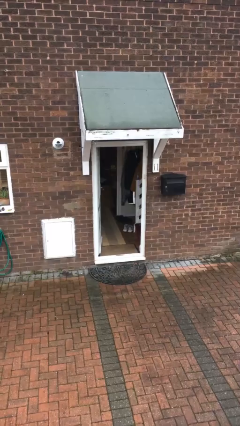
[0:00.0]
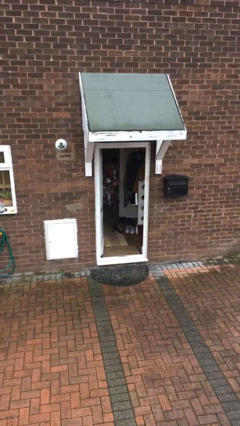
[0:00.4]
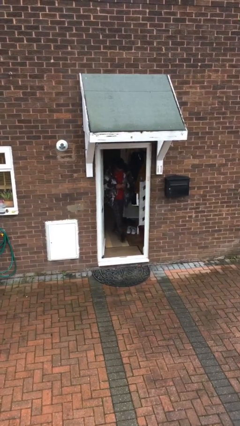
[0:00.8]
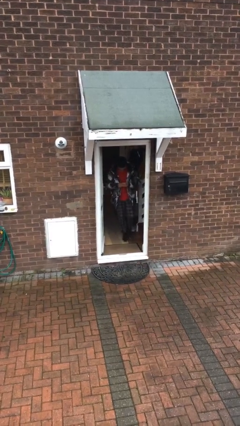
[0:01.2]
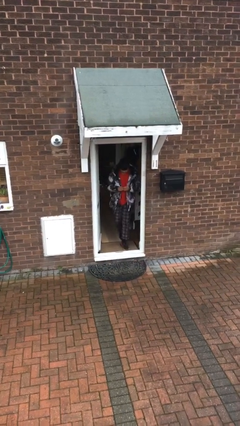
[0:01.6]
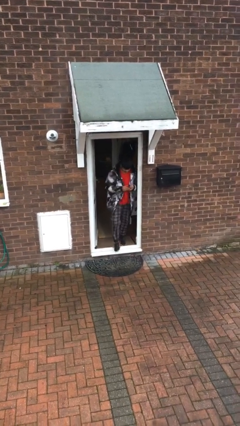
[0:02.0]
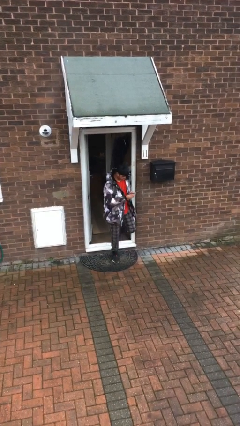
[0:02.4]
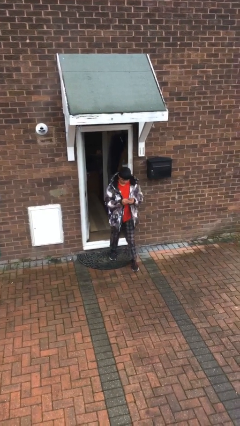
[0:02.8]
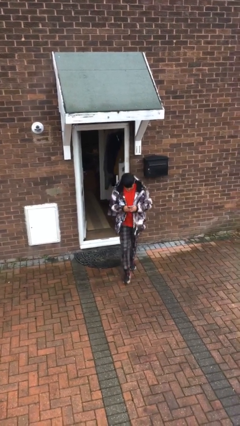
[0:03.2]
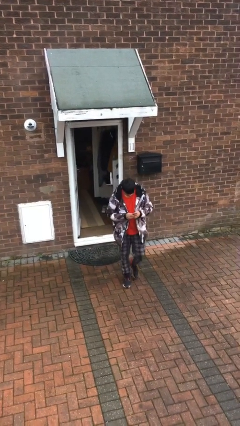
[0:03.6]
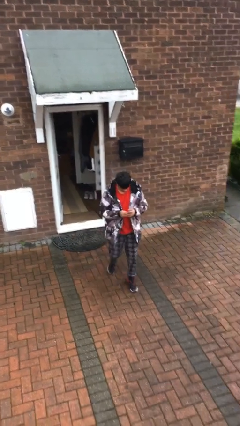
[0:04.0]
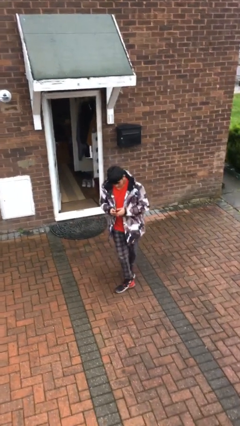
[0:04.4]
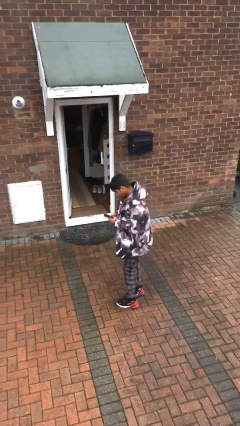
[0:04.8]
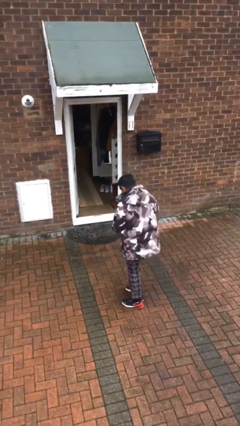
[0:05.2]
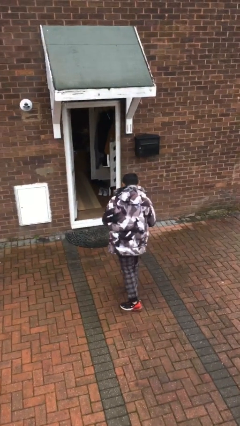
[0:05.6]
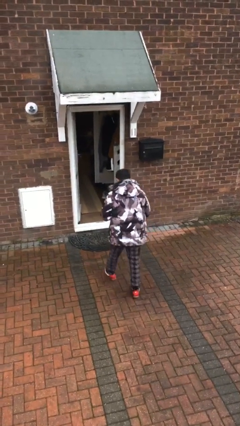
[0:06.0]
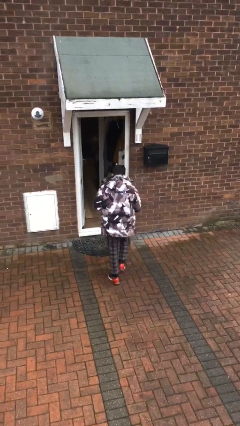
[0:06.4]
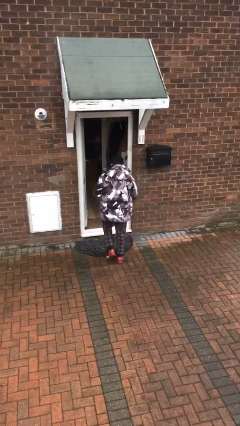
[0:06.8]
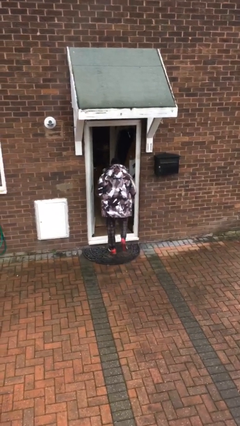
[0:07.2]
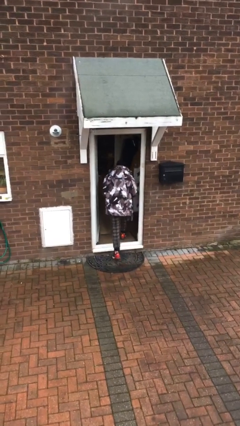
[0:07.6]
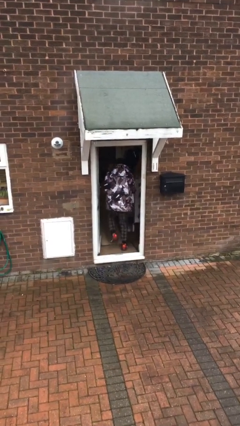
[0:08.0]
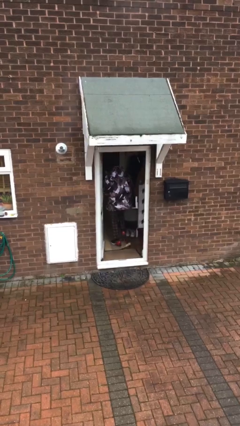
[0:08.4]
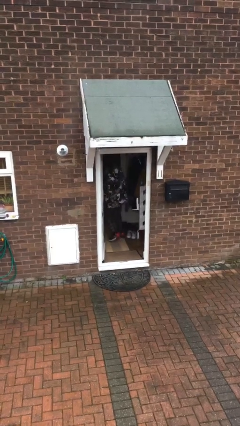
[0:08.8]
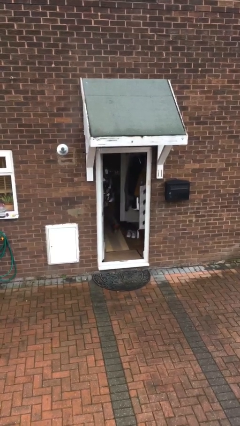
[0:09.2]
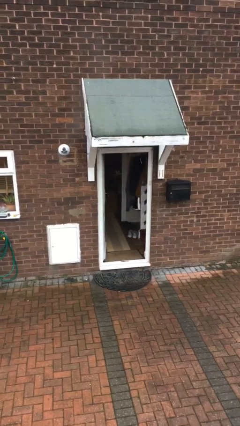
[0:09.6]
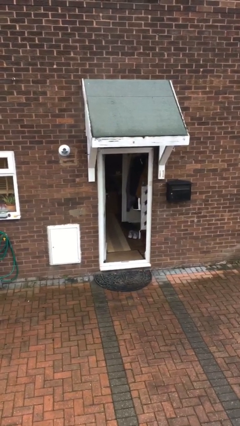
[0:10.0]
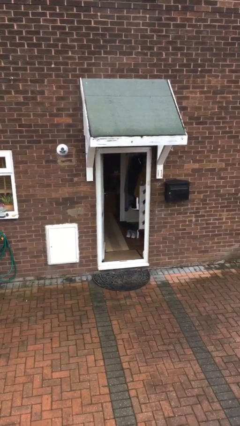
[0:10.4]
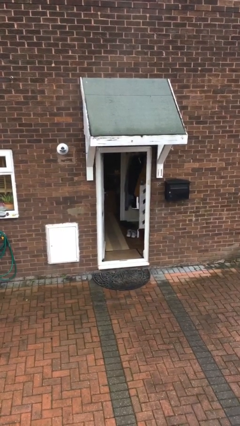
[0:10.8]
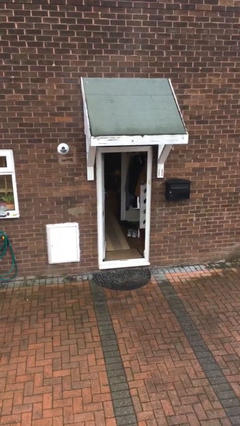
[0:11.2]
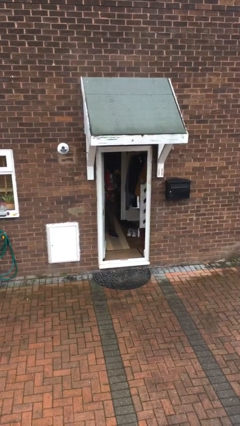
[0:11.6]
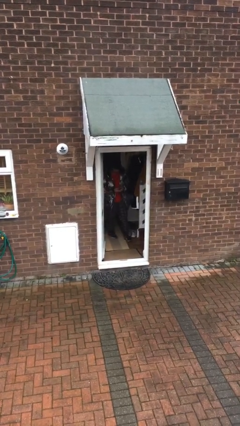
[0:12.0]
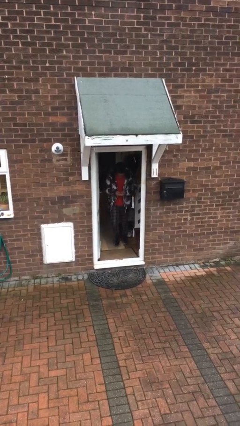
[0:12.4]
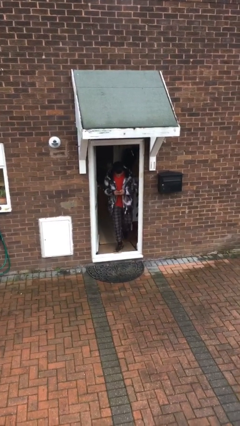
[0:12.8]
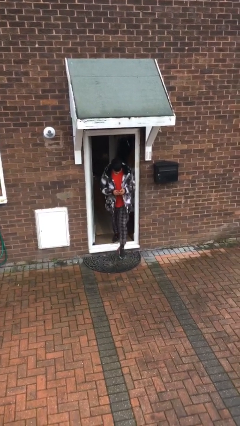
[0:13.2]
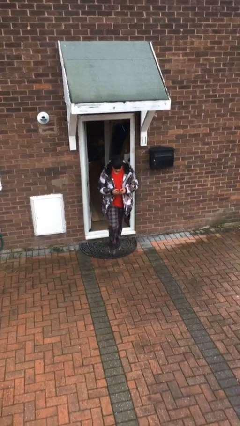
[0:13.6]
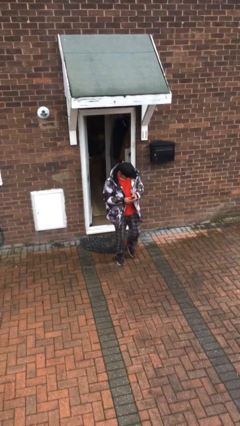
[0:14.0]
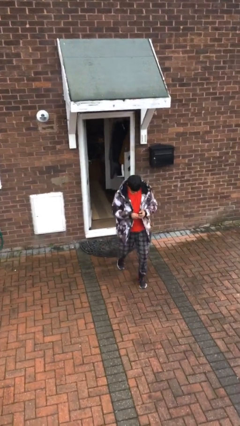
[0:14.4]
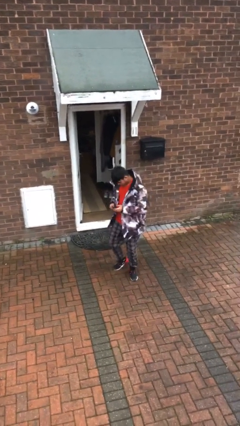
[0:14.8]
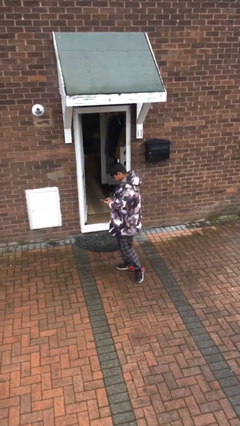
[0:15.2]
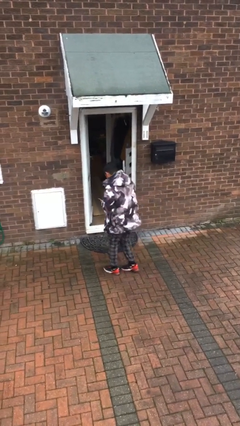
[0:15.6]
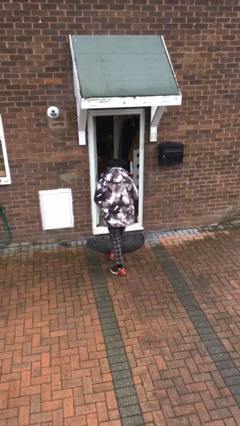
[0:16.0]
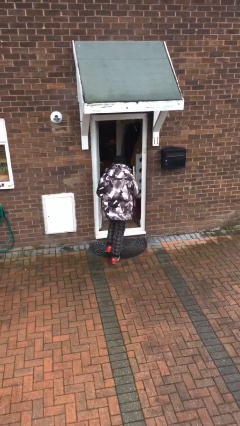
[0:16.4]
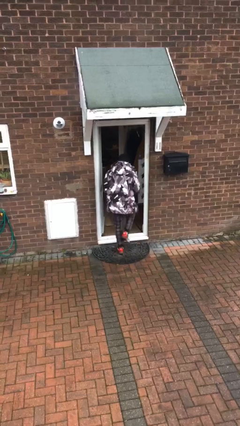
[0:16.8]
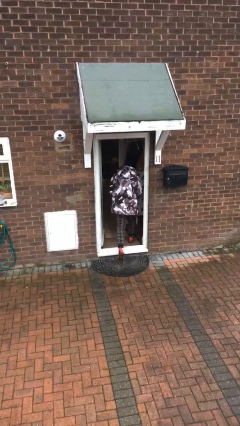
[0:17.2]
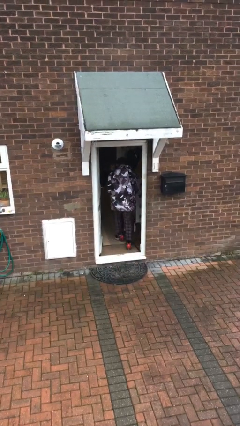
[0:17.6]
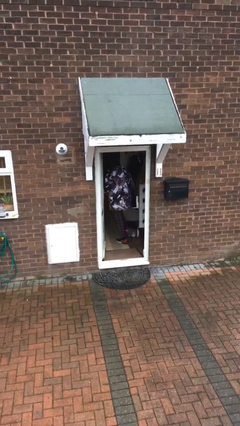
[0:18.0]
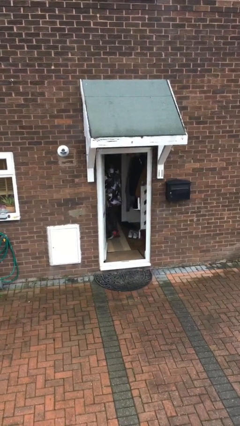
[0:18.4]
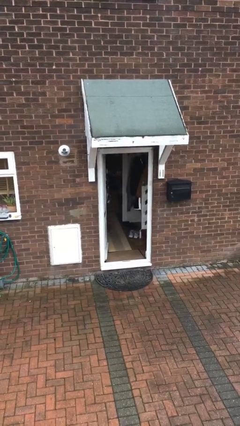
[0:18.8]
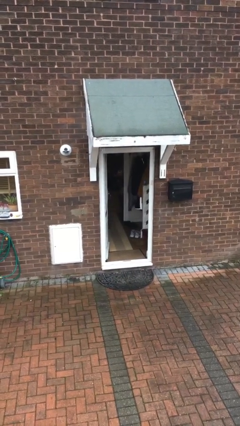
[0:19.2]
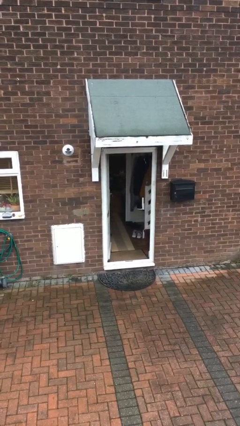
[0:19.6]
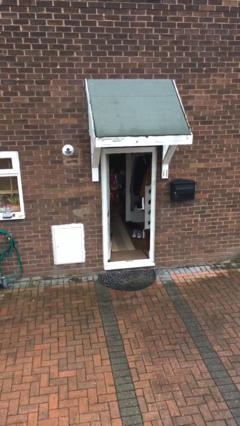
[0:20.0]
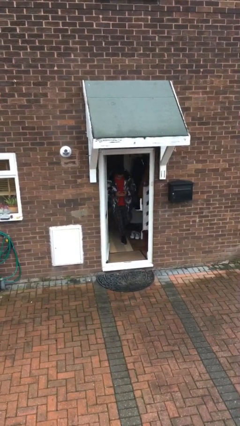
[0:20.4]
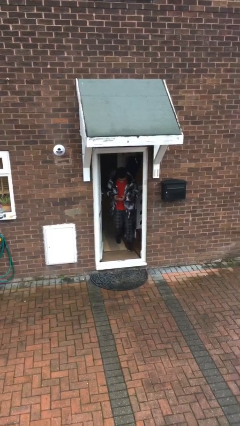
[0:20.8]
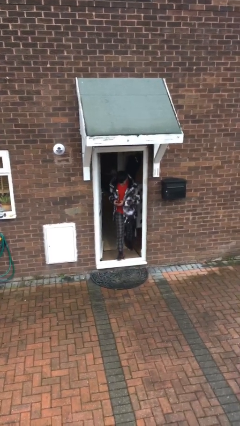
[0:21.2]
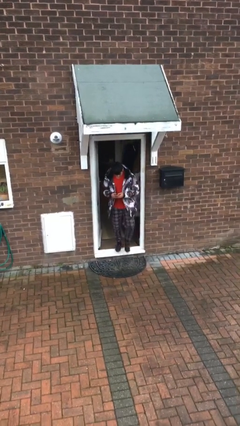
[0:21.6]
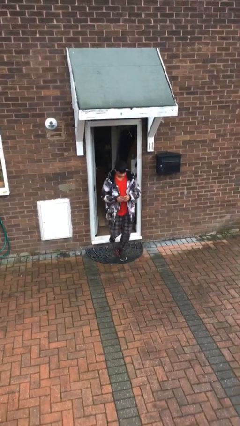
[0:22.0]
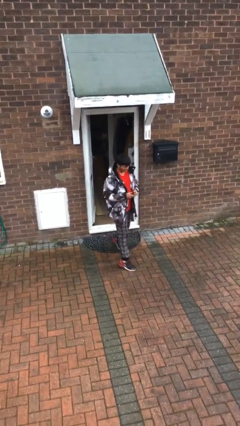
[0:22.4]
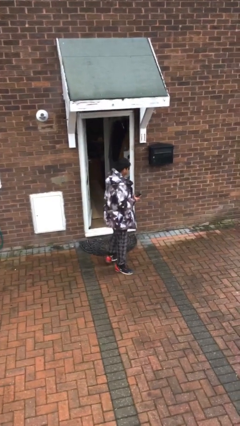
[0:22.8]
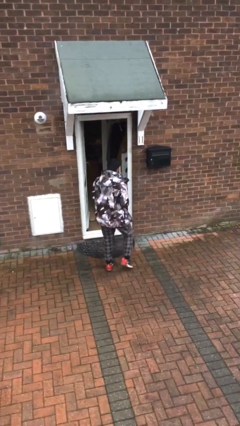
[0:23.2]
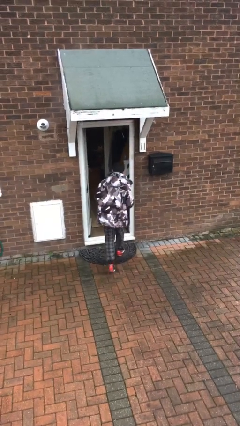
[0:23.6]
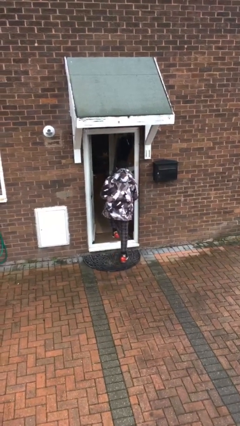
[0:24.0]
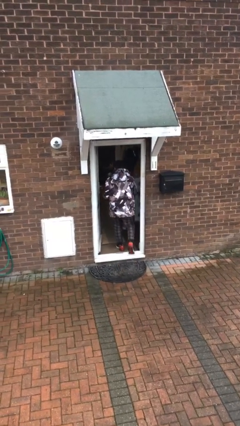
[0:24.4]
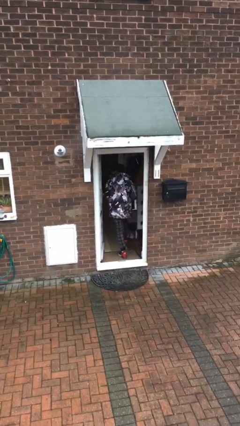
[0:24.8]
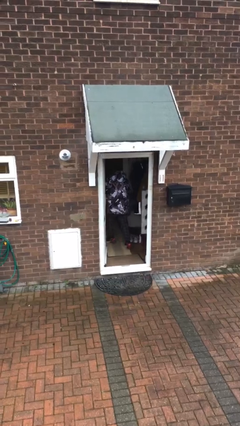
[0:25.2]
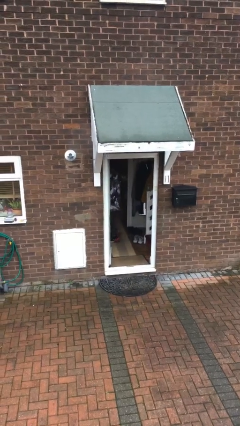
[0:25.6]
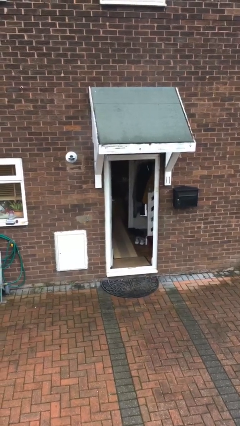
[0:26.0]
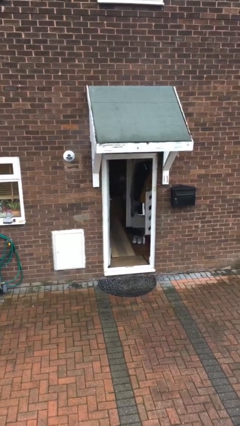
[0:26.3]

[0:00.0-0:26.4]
person texts on phone

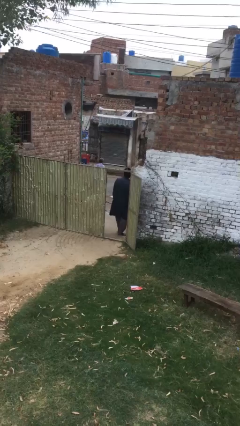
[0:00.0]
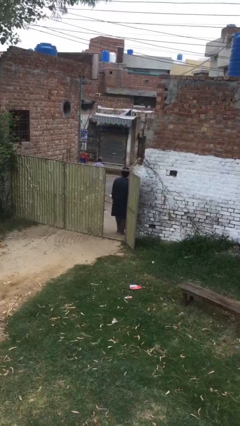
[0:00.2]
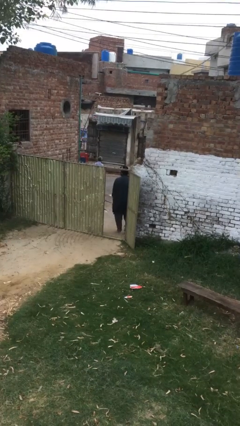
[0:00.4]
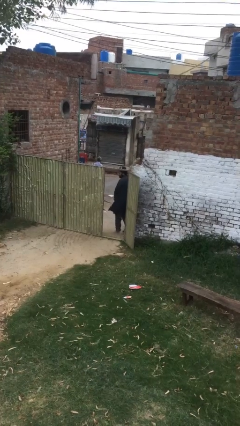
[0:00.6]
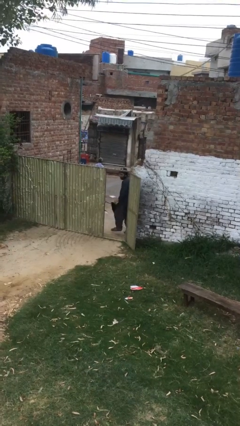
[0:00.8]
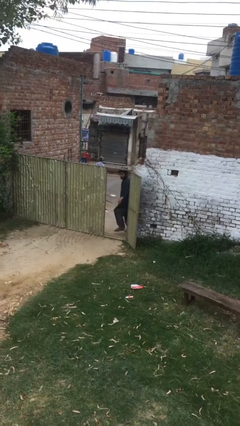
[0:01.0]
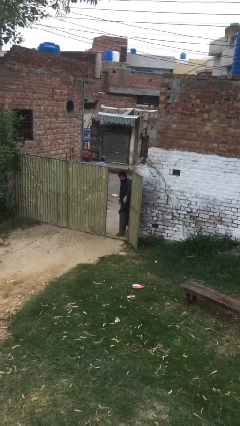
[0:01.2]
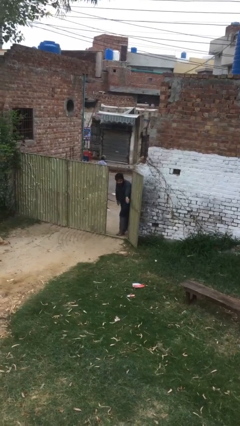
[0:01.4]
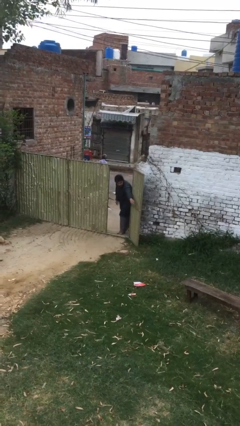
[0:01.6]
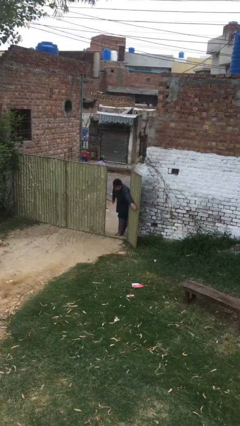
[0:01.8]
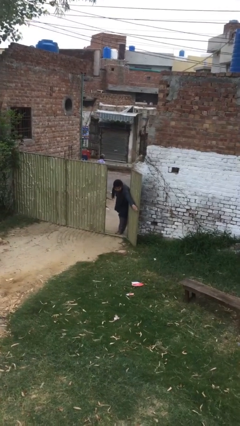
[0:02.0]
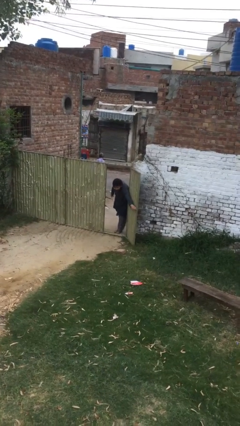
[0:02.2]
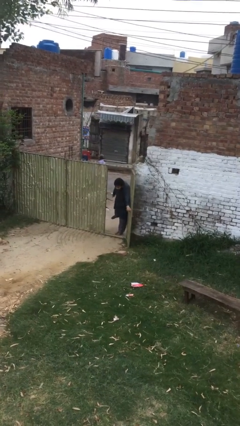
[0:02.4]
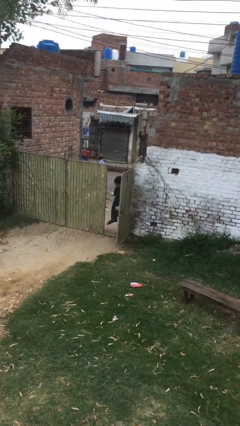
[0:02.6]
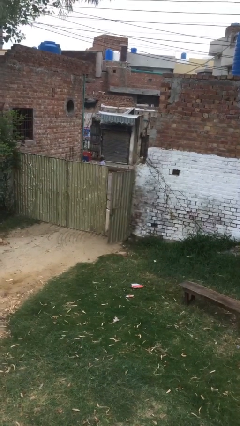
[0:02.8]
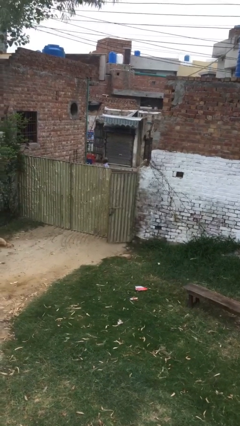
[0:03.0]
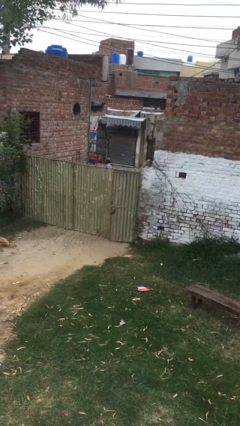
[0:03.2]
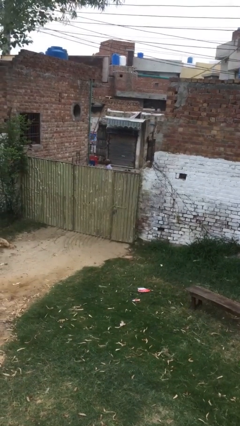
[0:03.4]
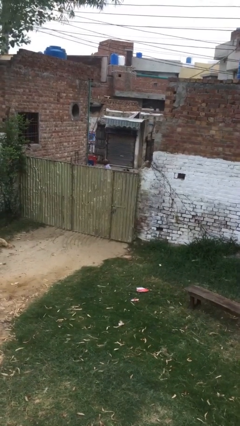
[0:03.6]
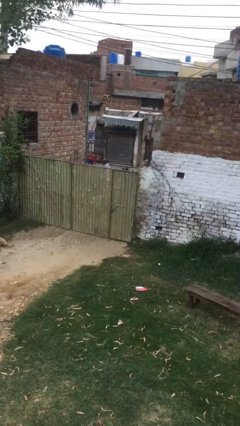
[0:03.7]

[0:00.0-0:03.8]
person closes facility door

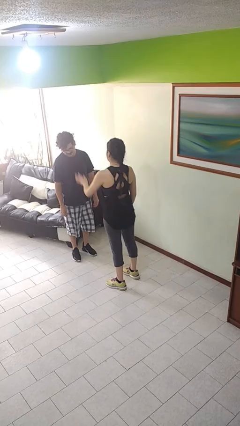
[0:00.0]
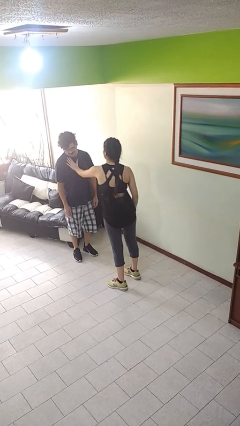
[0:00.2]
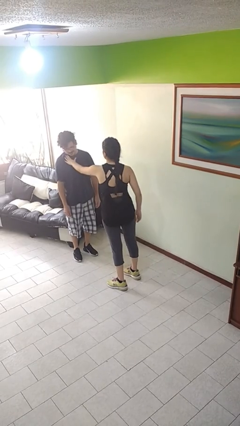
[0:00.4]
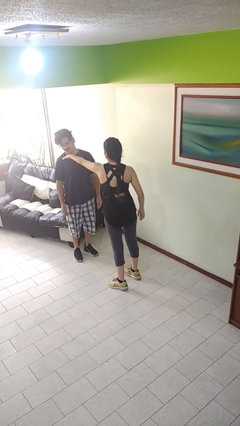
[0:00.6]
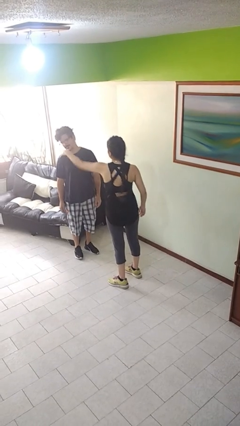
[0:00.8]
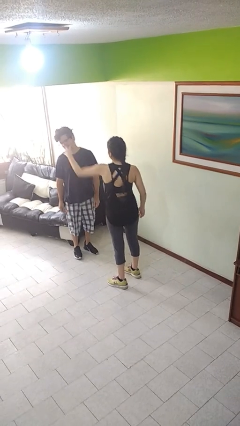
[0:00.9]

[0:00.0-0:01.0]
person shoves person

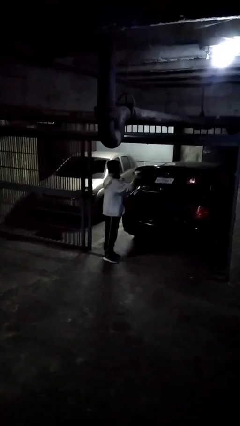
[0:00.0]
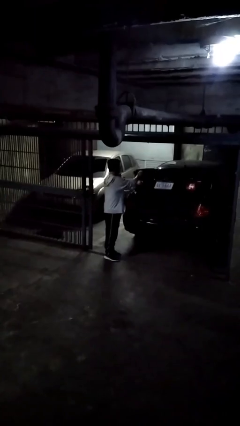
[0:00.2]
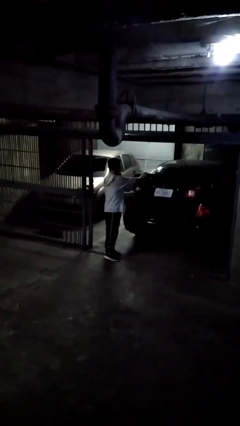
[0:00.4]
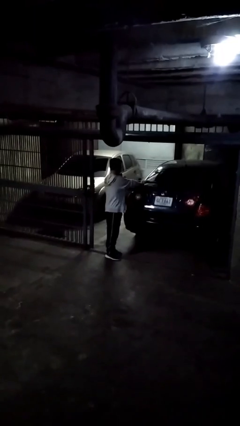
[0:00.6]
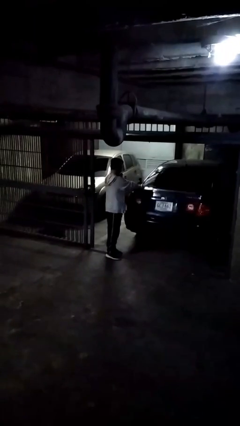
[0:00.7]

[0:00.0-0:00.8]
person closes car trunk
